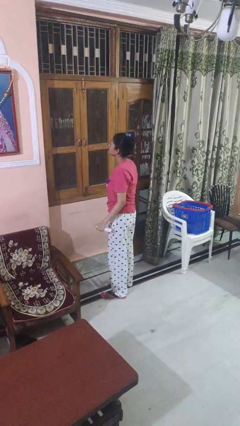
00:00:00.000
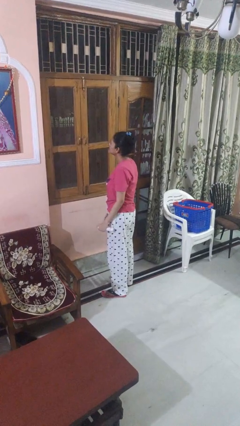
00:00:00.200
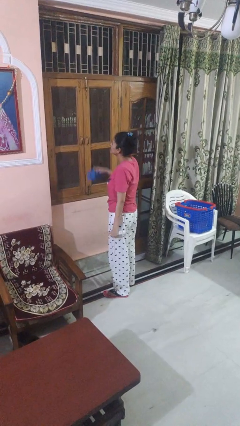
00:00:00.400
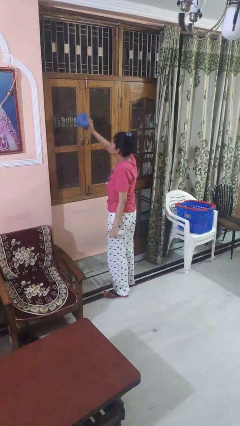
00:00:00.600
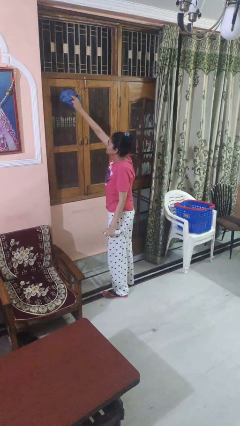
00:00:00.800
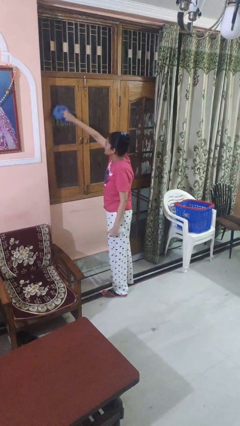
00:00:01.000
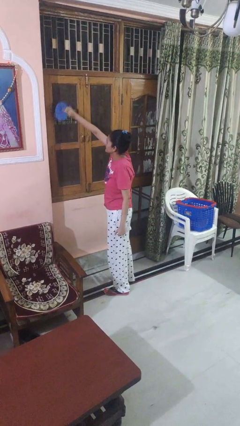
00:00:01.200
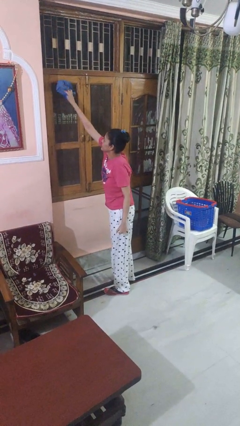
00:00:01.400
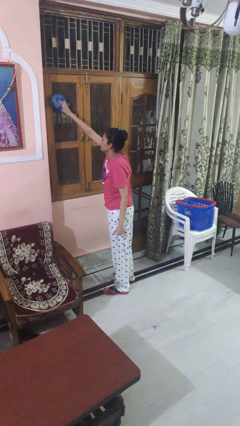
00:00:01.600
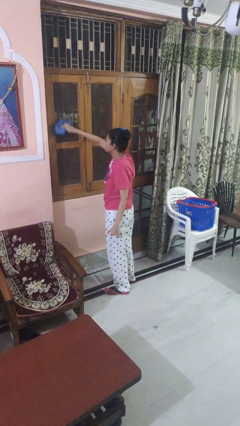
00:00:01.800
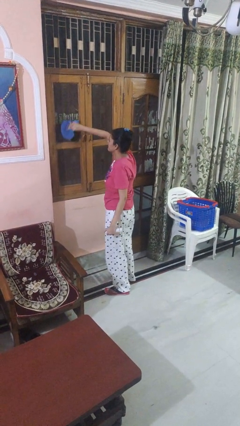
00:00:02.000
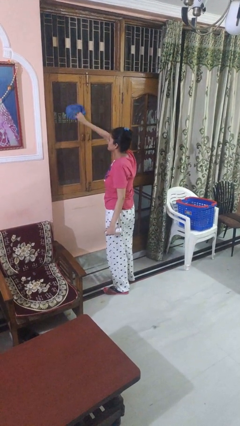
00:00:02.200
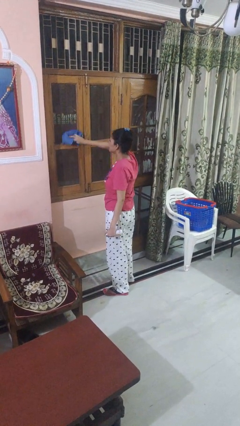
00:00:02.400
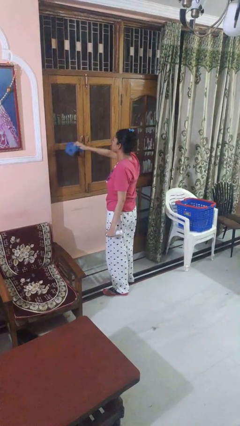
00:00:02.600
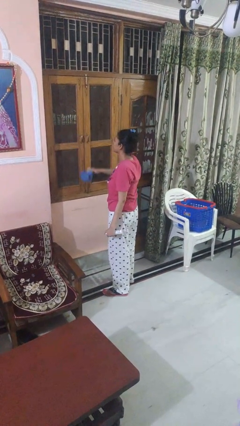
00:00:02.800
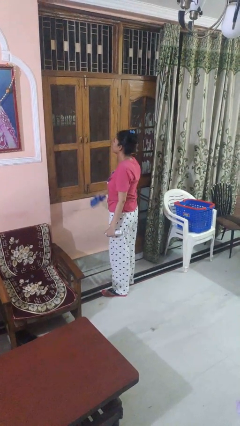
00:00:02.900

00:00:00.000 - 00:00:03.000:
person washes window

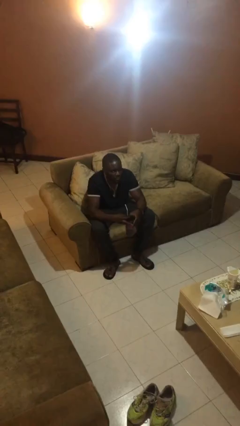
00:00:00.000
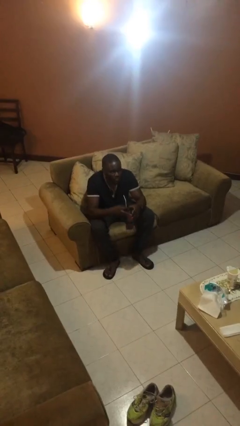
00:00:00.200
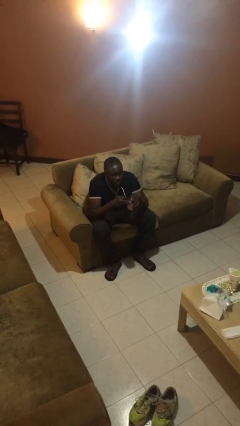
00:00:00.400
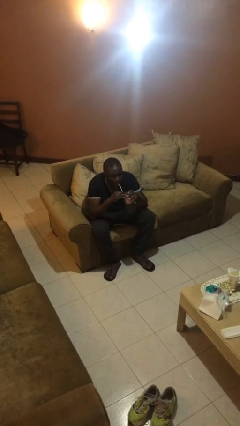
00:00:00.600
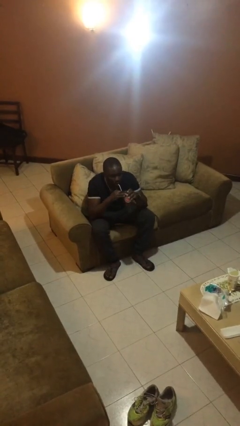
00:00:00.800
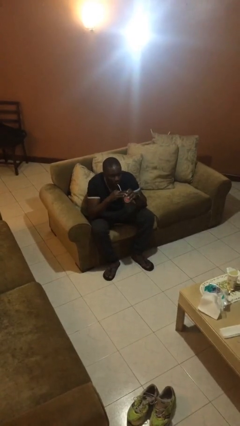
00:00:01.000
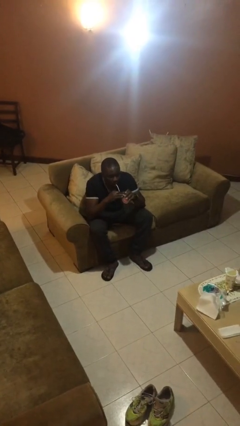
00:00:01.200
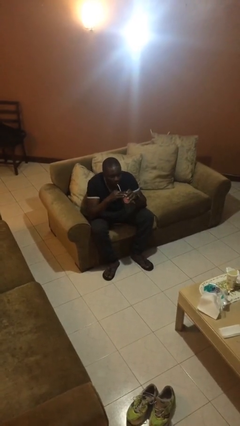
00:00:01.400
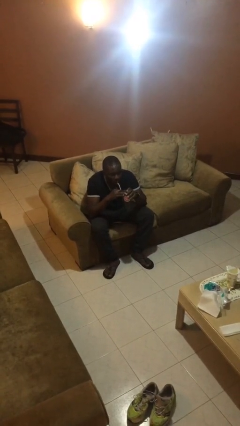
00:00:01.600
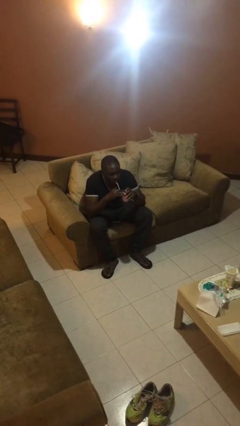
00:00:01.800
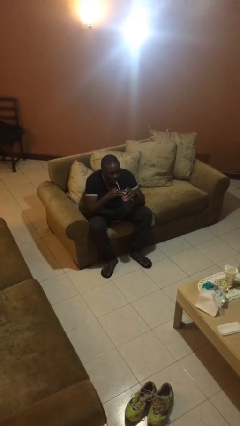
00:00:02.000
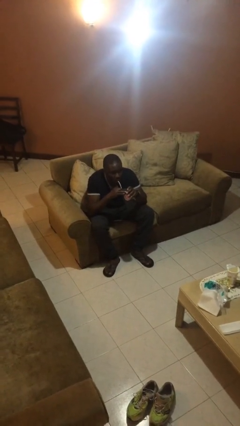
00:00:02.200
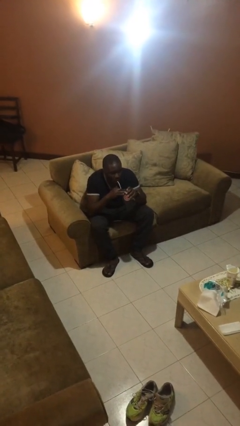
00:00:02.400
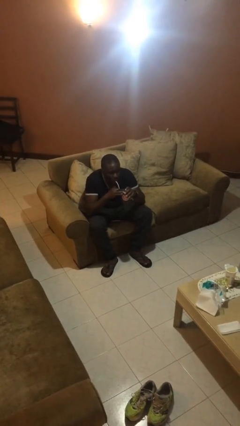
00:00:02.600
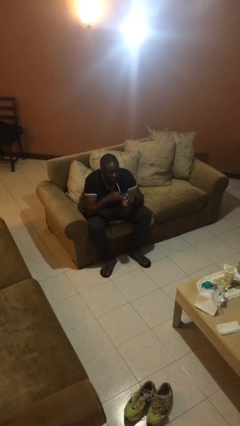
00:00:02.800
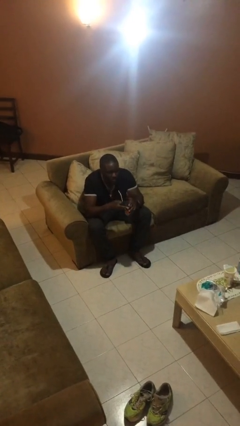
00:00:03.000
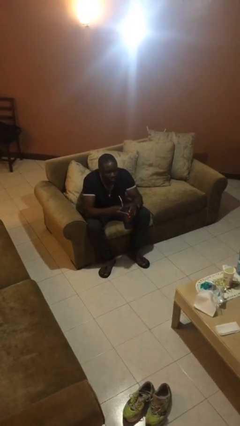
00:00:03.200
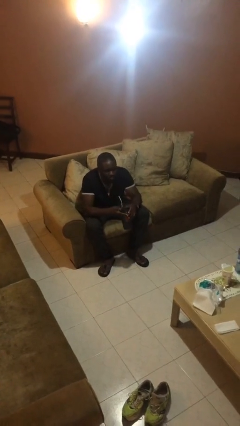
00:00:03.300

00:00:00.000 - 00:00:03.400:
person drinks from straw

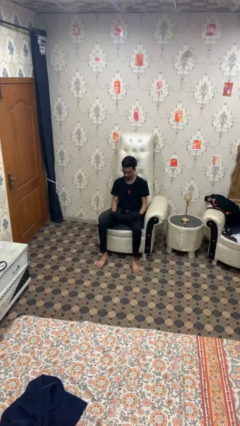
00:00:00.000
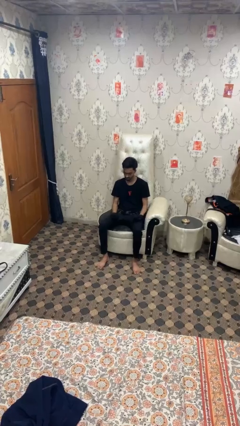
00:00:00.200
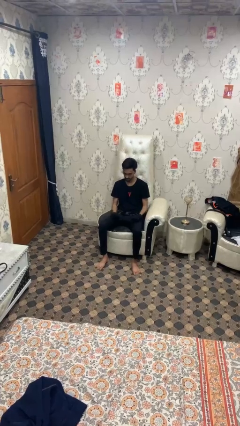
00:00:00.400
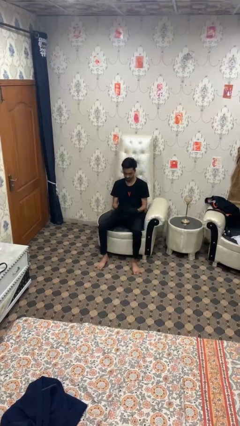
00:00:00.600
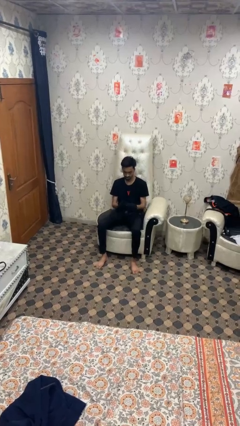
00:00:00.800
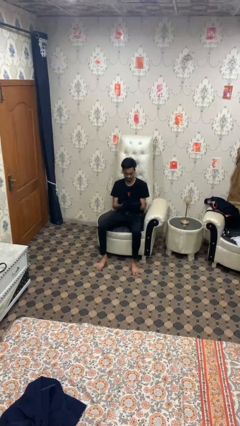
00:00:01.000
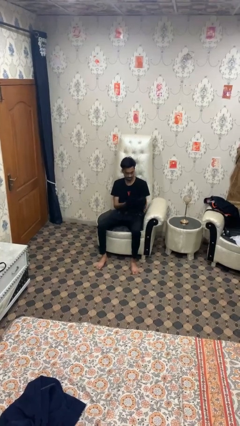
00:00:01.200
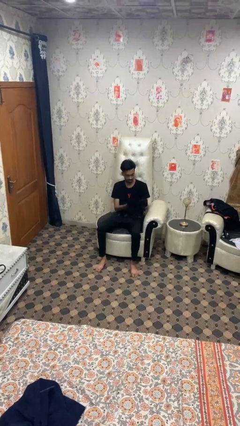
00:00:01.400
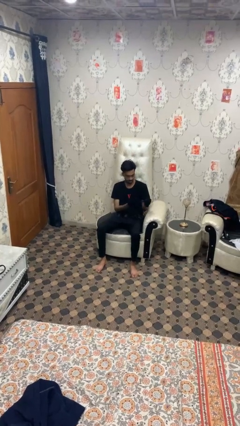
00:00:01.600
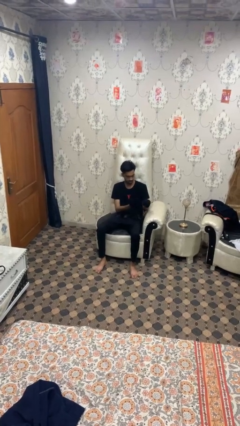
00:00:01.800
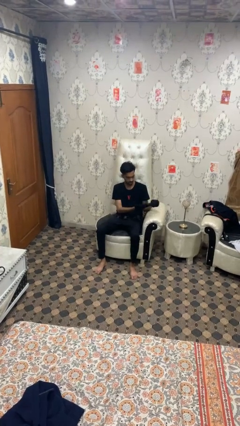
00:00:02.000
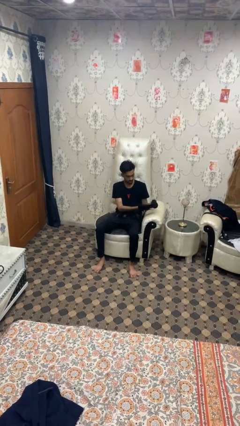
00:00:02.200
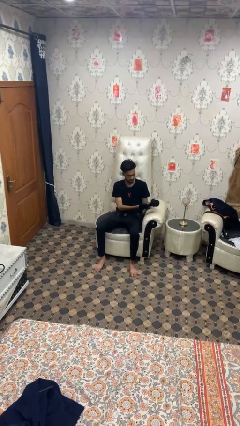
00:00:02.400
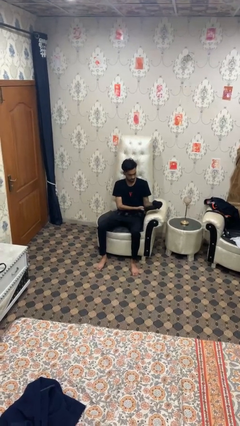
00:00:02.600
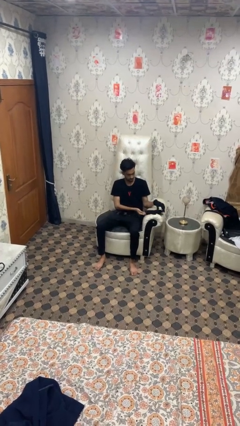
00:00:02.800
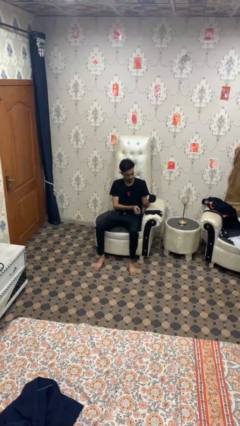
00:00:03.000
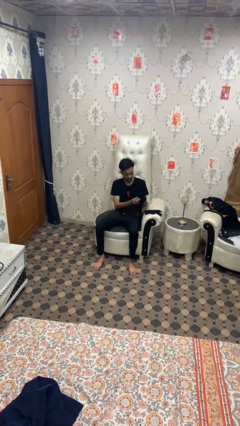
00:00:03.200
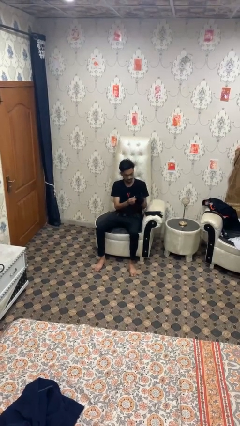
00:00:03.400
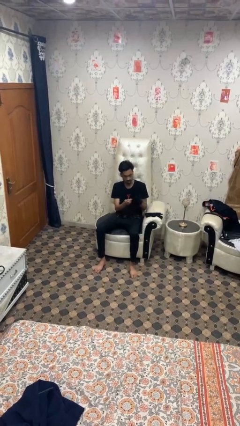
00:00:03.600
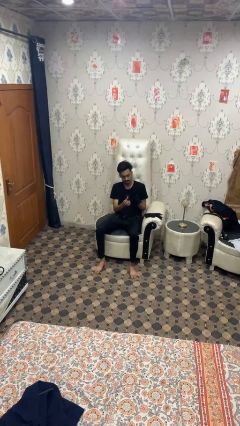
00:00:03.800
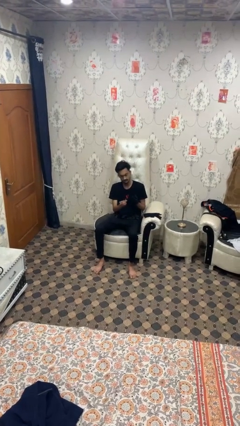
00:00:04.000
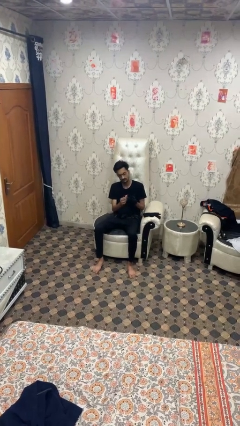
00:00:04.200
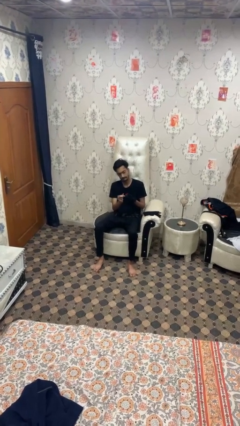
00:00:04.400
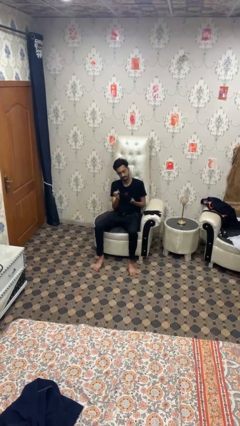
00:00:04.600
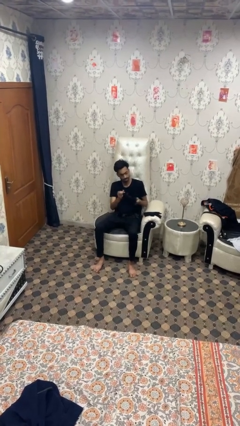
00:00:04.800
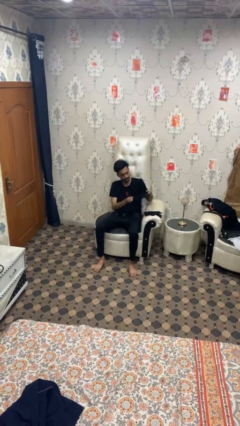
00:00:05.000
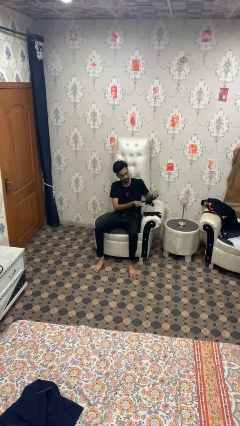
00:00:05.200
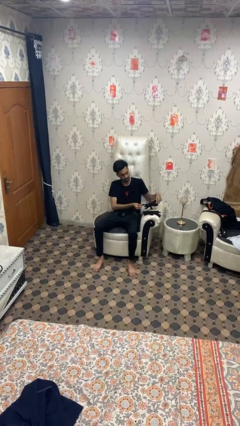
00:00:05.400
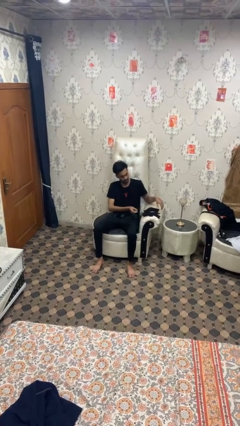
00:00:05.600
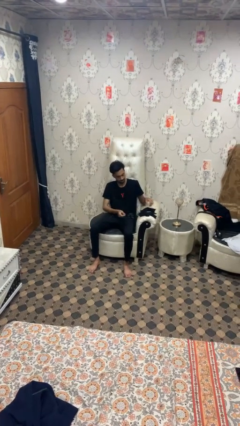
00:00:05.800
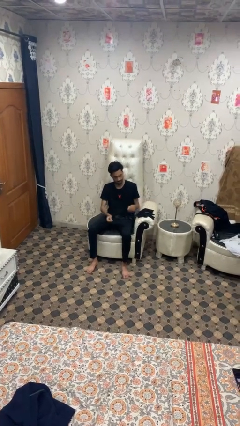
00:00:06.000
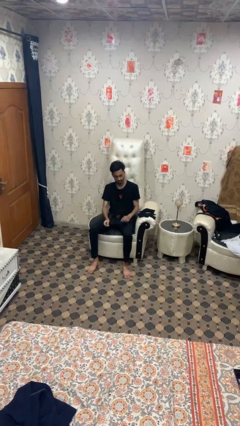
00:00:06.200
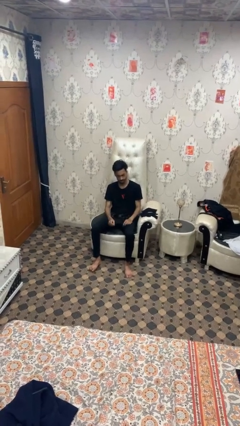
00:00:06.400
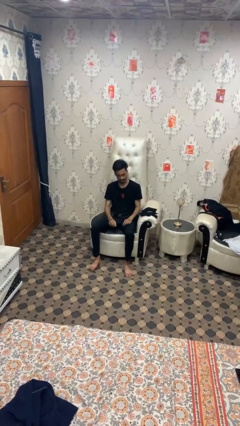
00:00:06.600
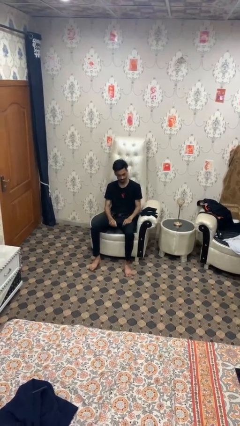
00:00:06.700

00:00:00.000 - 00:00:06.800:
person takes off gloves

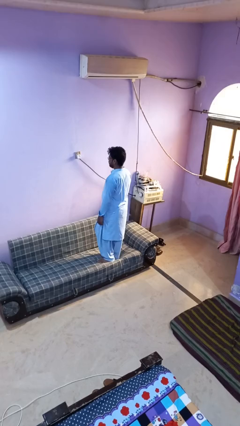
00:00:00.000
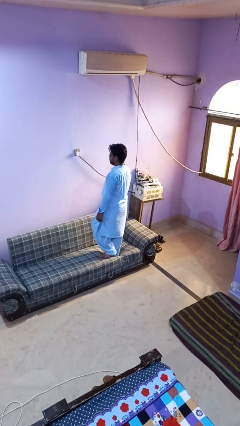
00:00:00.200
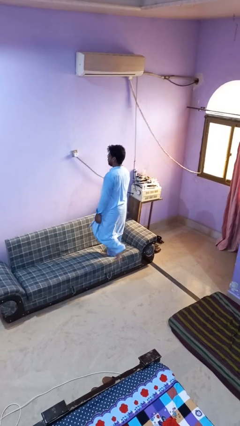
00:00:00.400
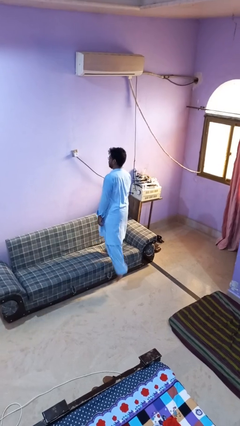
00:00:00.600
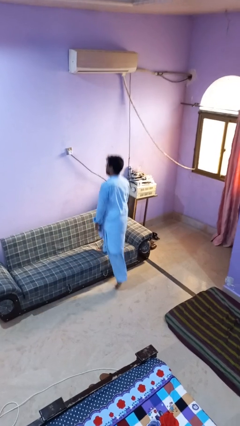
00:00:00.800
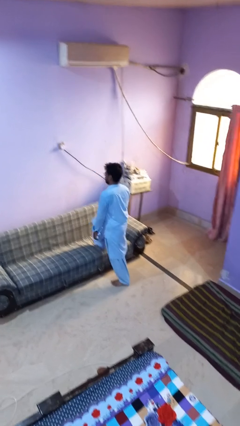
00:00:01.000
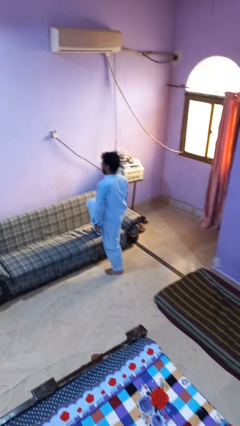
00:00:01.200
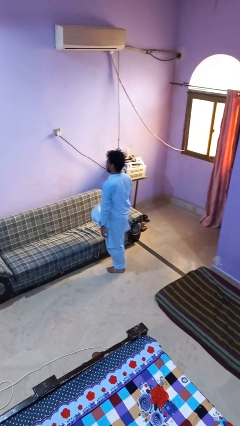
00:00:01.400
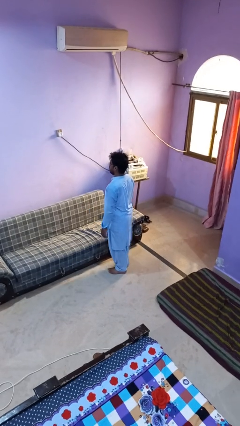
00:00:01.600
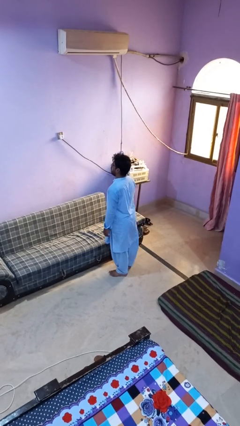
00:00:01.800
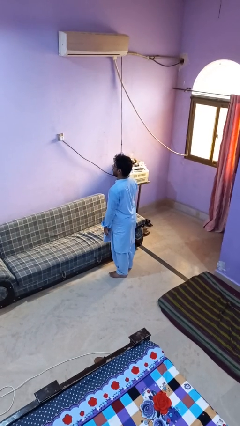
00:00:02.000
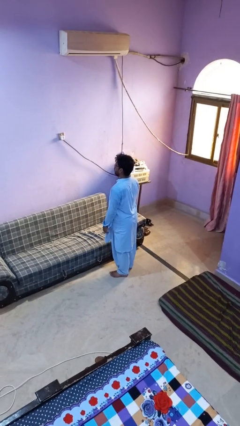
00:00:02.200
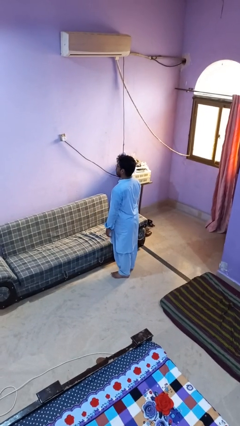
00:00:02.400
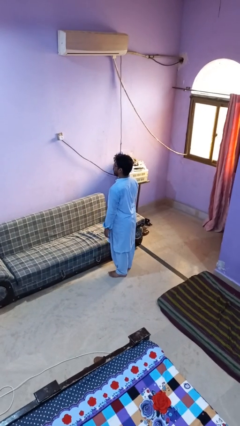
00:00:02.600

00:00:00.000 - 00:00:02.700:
person climbs off couch

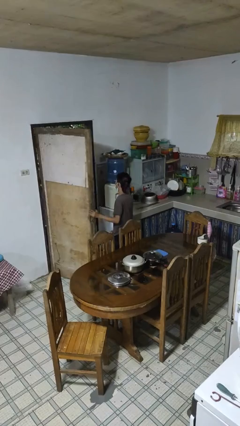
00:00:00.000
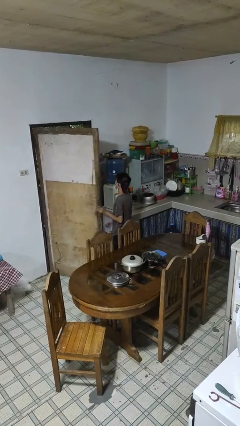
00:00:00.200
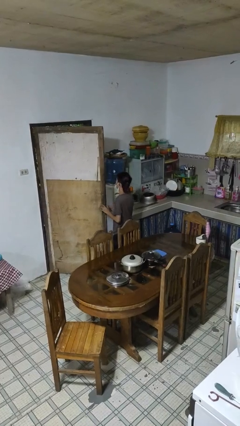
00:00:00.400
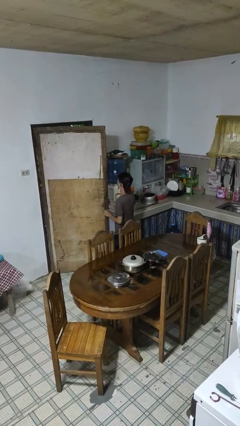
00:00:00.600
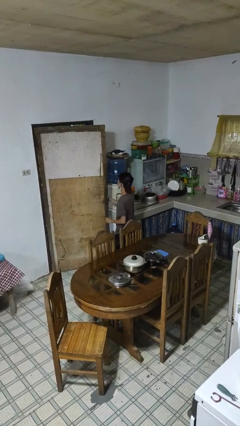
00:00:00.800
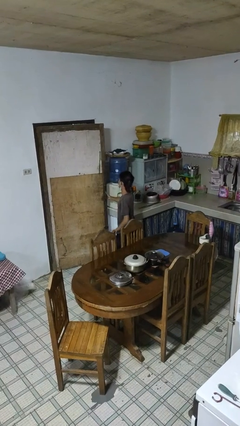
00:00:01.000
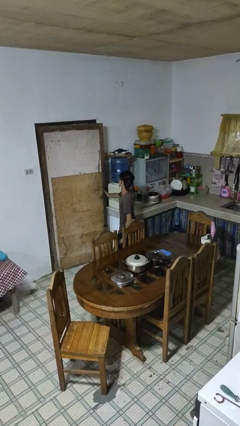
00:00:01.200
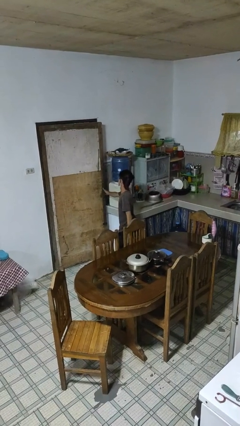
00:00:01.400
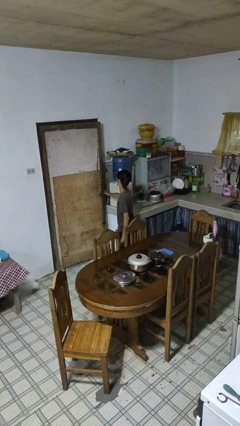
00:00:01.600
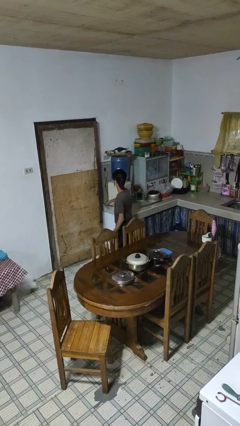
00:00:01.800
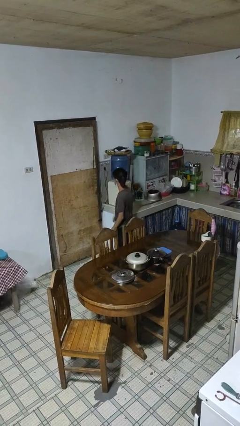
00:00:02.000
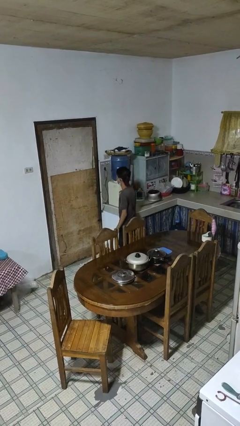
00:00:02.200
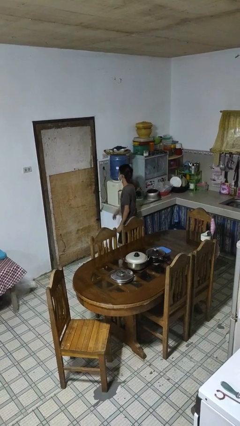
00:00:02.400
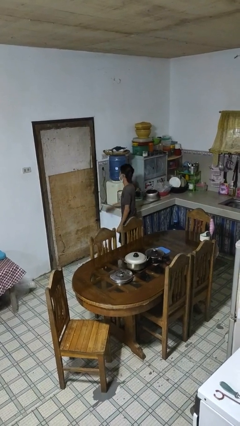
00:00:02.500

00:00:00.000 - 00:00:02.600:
person closes facility door
